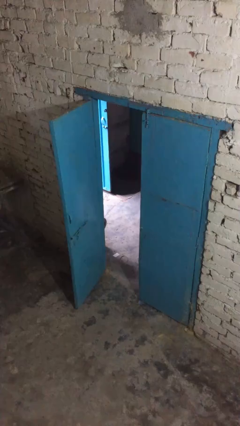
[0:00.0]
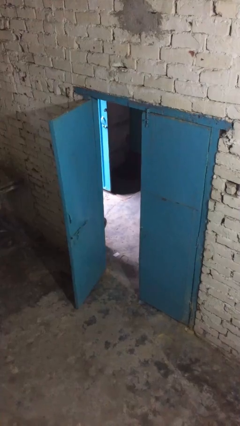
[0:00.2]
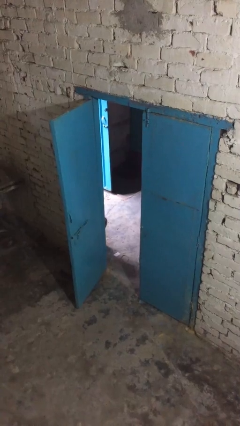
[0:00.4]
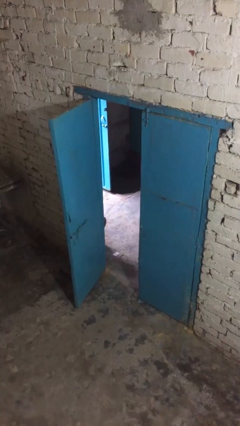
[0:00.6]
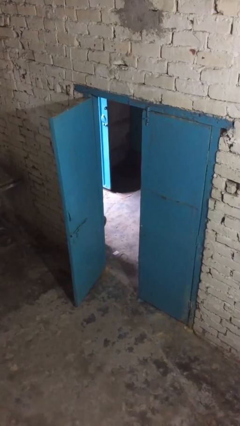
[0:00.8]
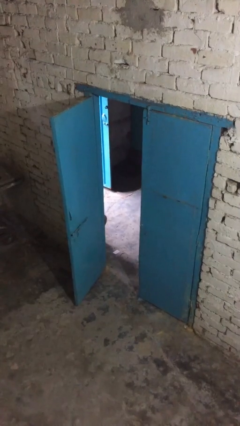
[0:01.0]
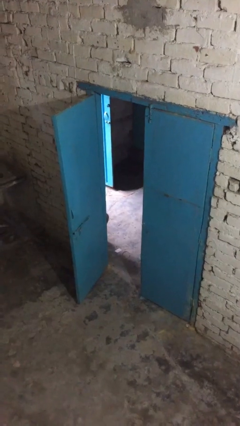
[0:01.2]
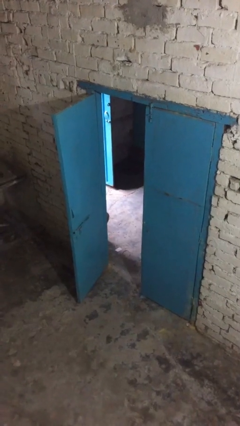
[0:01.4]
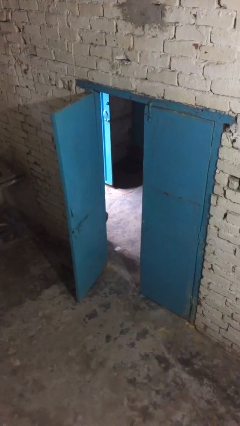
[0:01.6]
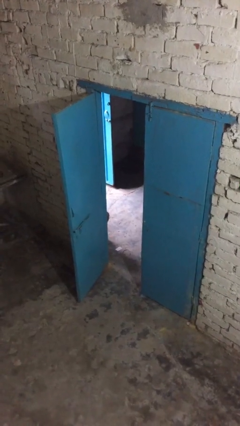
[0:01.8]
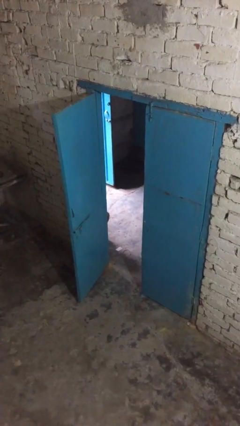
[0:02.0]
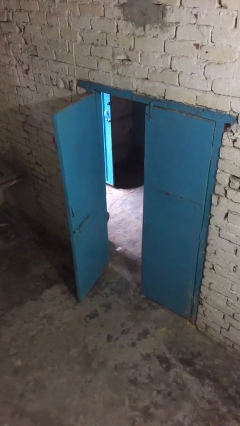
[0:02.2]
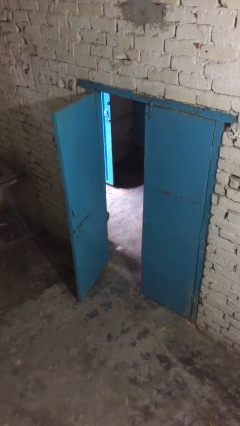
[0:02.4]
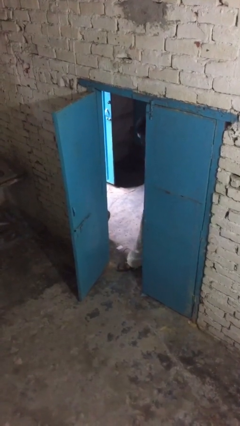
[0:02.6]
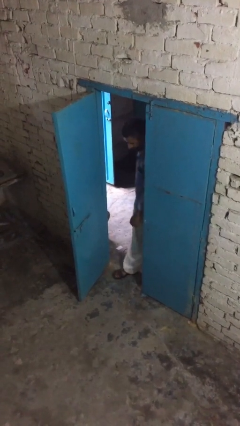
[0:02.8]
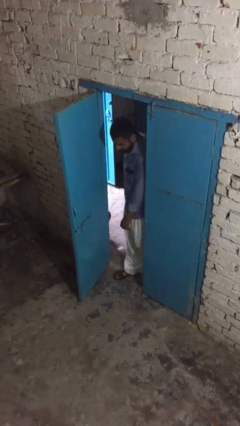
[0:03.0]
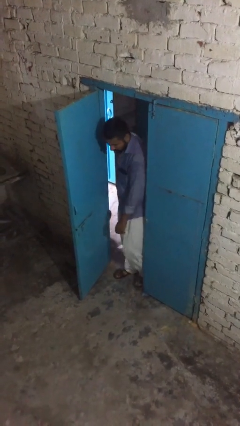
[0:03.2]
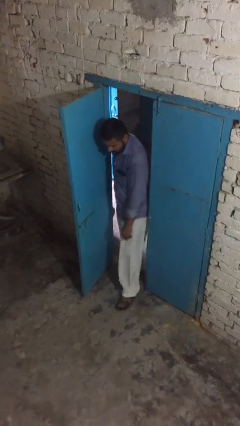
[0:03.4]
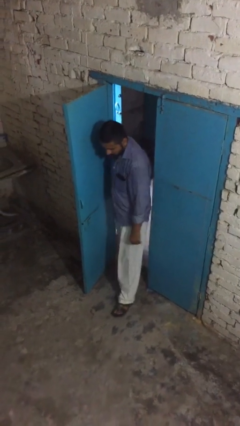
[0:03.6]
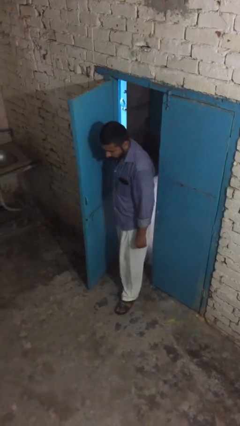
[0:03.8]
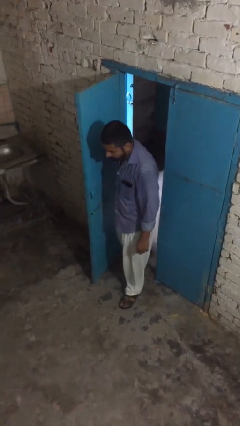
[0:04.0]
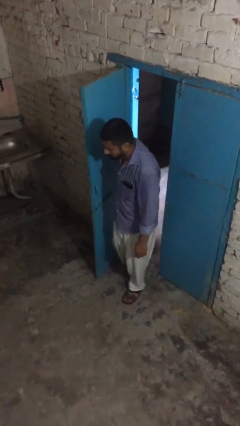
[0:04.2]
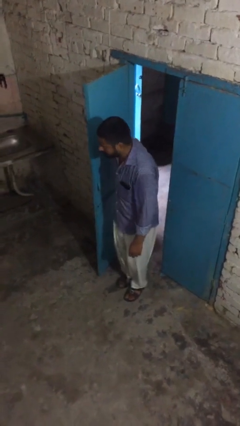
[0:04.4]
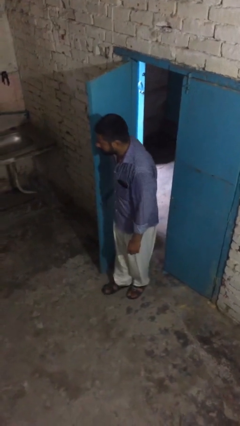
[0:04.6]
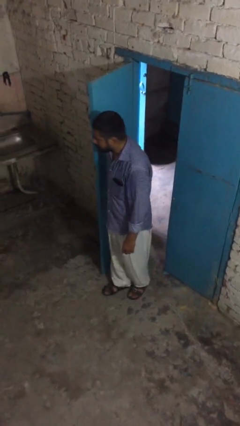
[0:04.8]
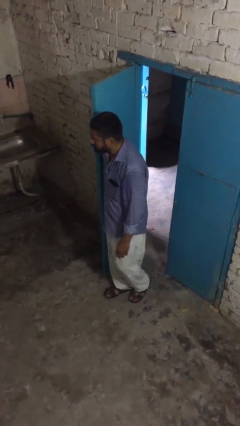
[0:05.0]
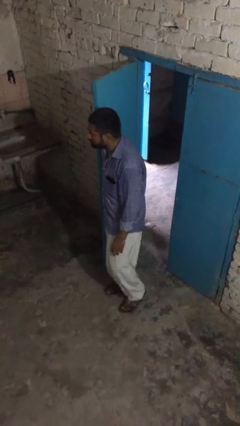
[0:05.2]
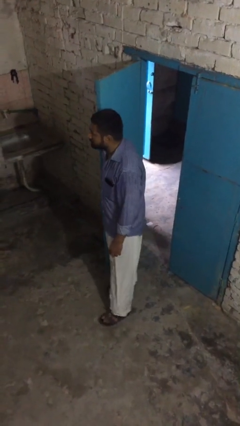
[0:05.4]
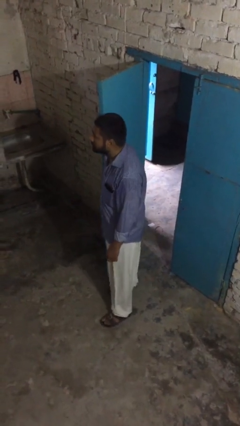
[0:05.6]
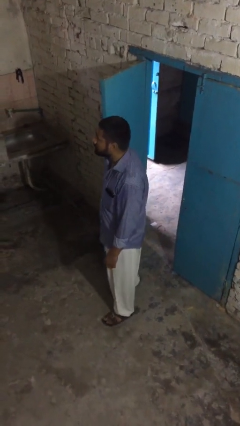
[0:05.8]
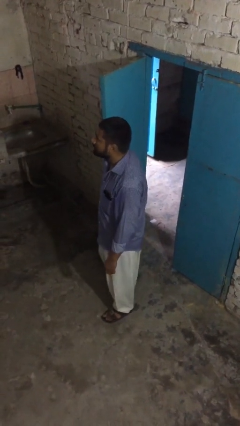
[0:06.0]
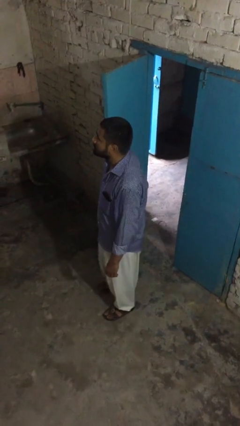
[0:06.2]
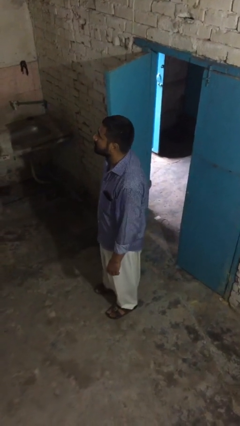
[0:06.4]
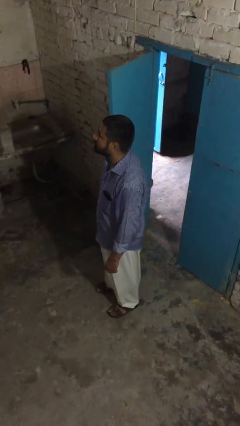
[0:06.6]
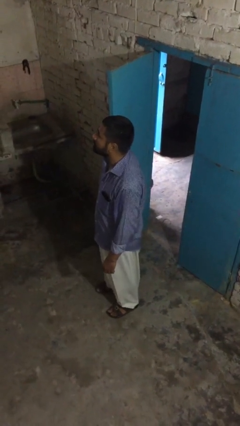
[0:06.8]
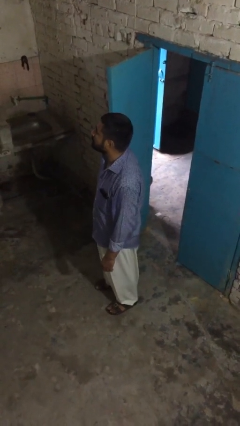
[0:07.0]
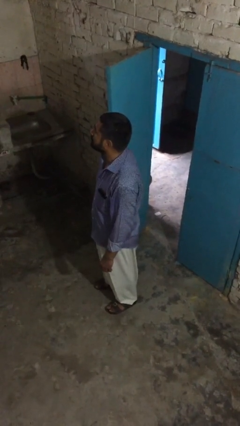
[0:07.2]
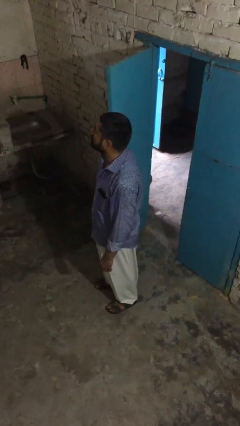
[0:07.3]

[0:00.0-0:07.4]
person enters scene through structure

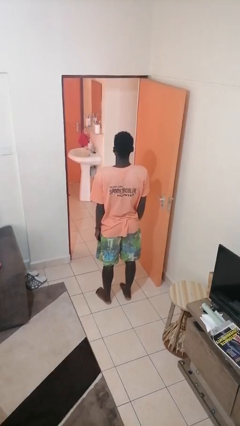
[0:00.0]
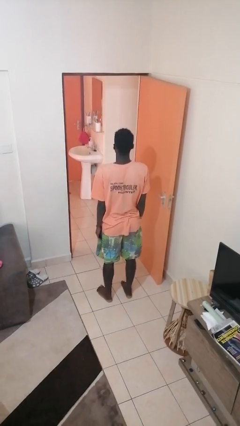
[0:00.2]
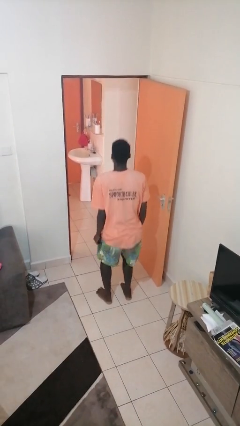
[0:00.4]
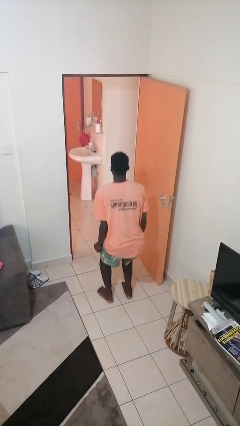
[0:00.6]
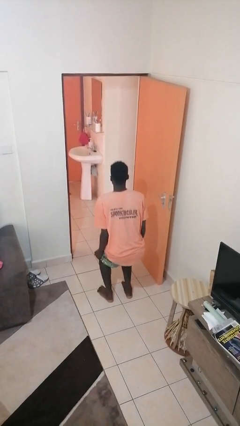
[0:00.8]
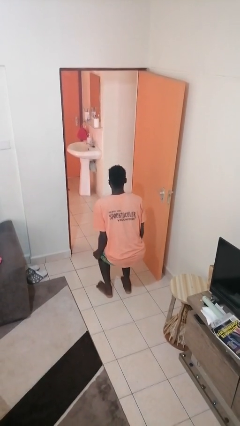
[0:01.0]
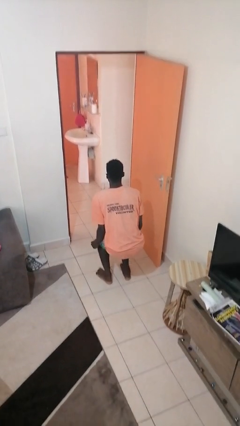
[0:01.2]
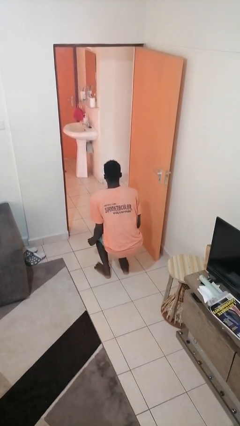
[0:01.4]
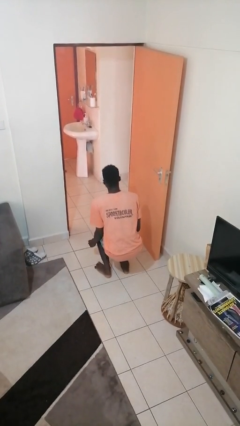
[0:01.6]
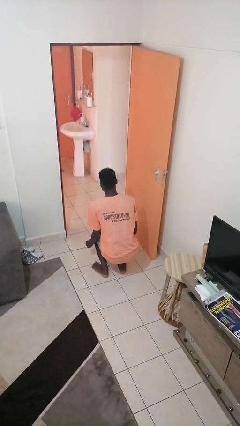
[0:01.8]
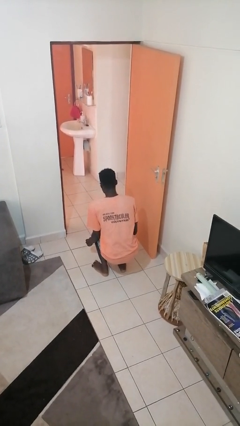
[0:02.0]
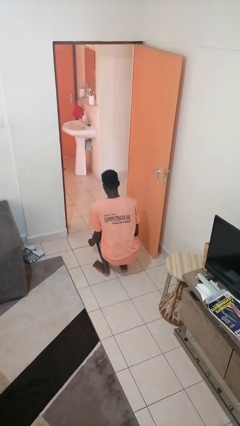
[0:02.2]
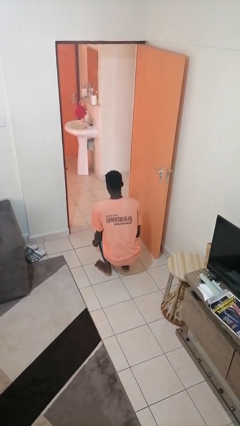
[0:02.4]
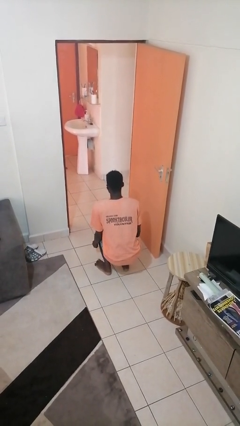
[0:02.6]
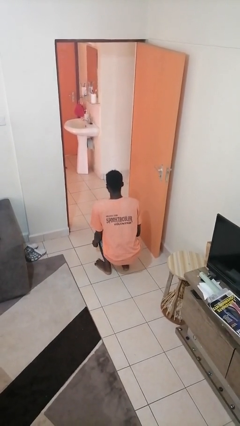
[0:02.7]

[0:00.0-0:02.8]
person squats

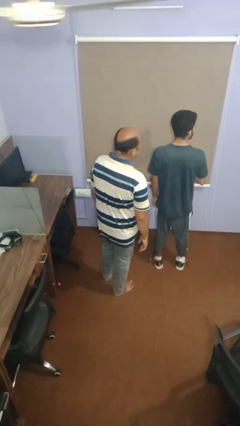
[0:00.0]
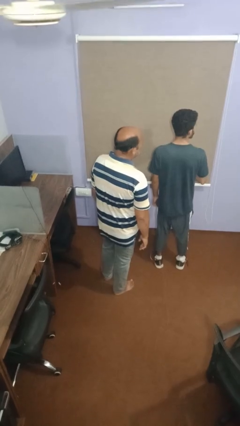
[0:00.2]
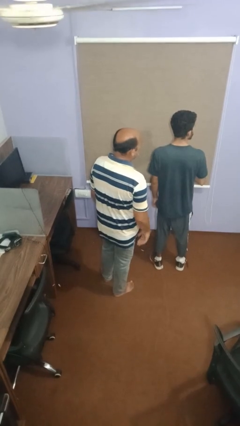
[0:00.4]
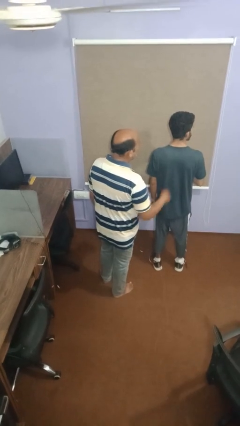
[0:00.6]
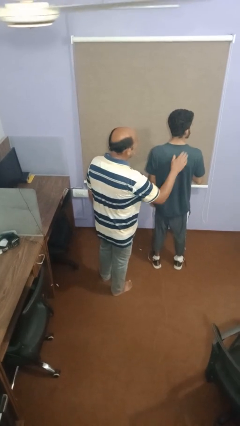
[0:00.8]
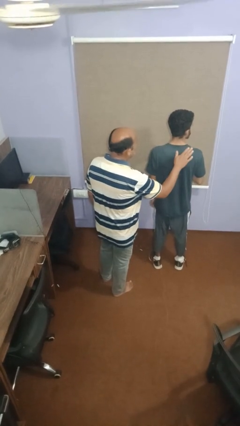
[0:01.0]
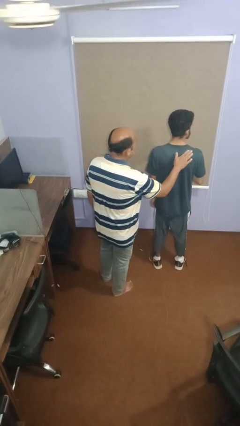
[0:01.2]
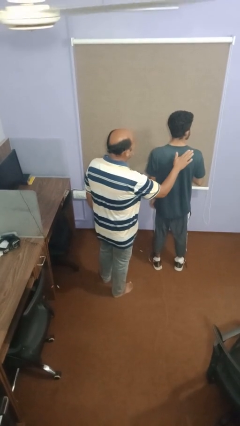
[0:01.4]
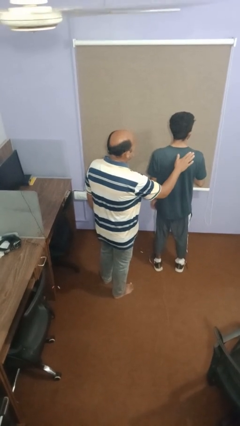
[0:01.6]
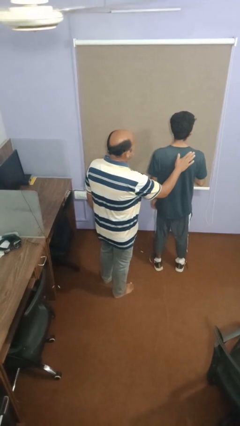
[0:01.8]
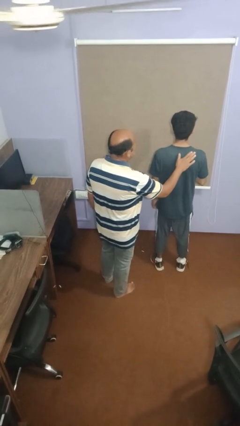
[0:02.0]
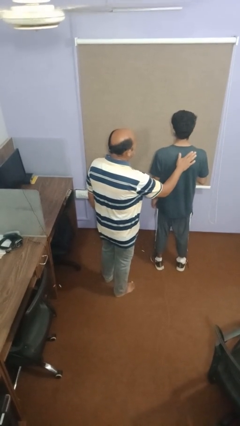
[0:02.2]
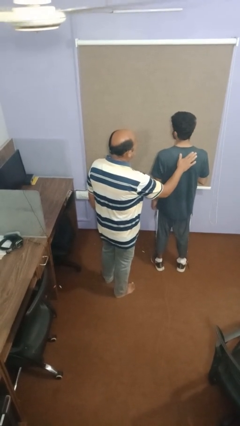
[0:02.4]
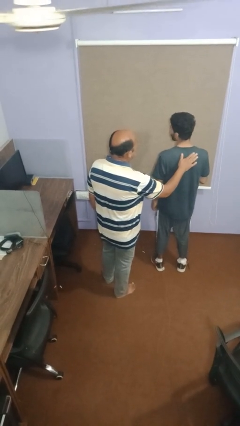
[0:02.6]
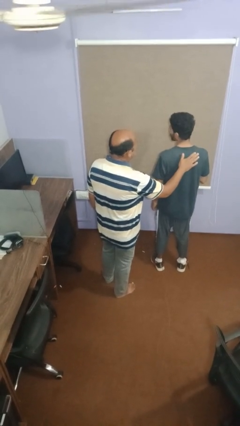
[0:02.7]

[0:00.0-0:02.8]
person touches back of person

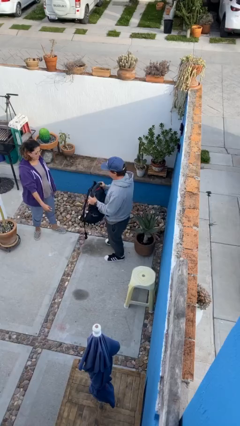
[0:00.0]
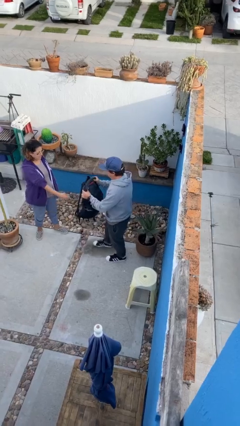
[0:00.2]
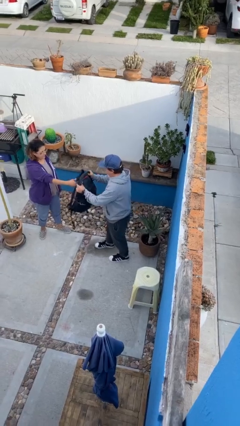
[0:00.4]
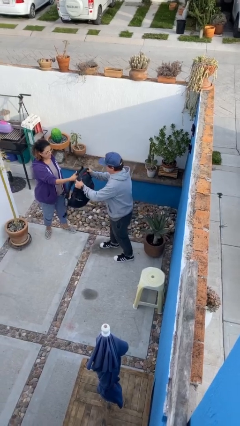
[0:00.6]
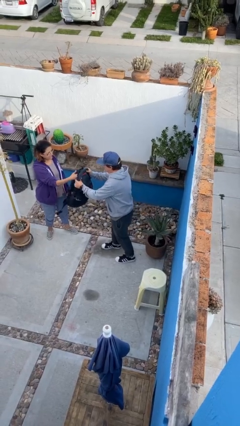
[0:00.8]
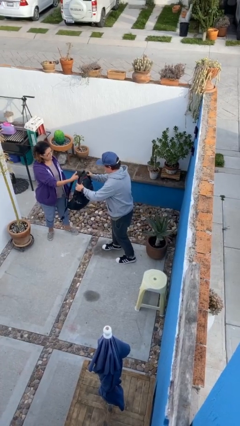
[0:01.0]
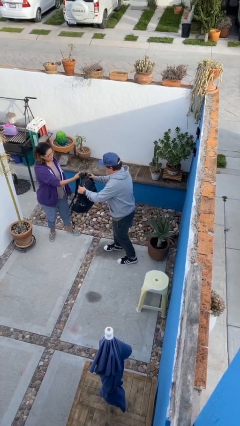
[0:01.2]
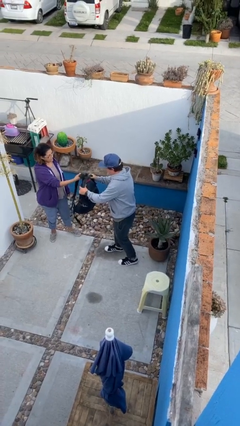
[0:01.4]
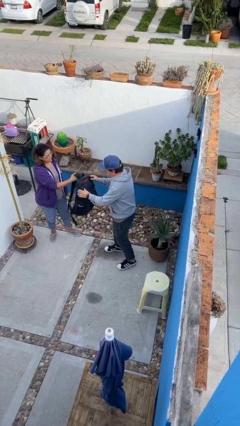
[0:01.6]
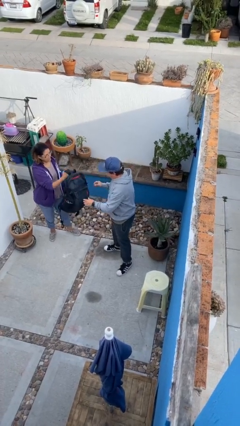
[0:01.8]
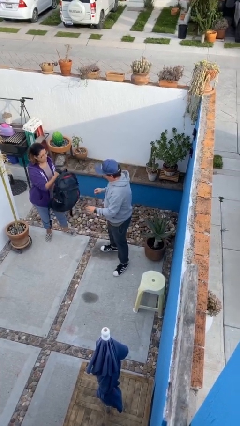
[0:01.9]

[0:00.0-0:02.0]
person transfers object to person

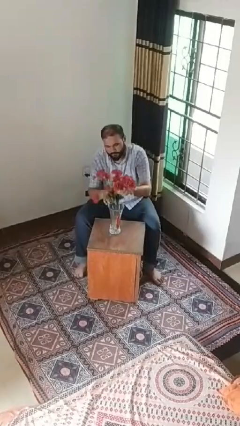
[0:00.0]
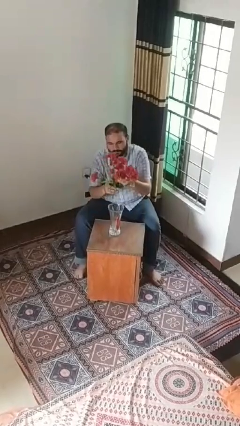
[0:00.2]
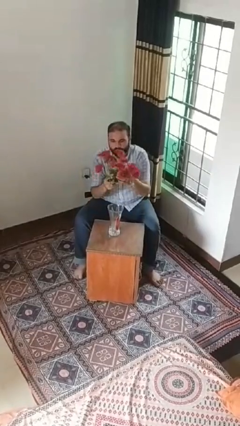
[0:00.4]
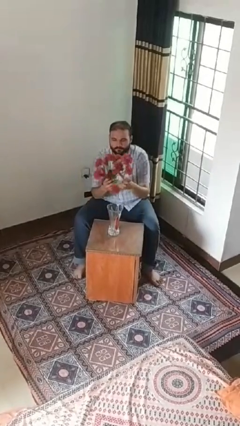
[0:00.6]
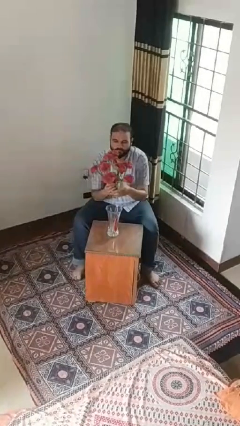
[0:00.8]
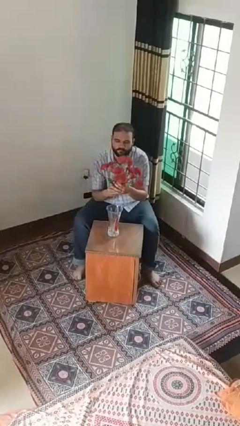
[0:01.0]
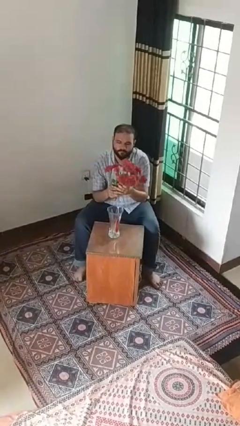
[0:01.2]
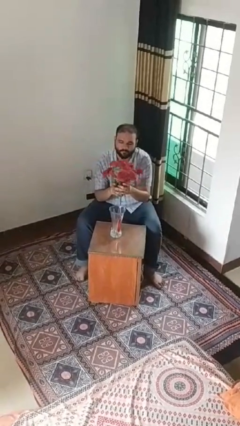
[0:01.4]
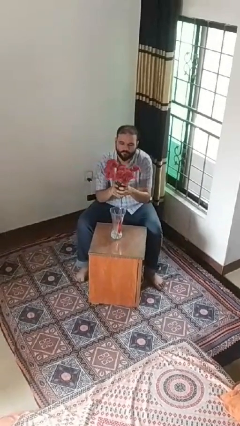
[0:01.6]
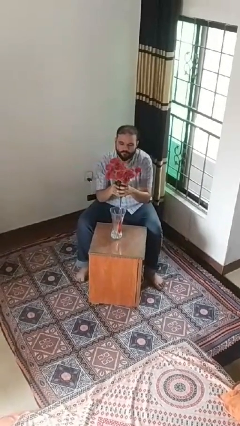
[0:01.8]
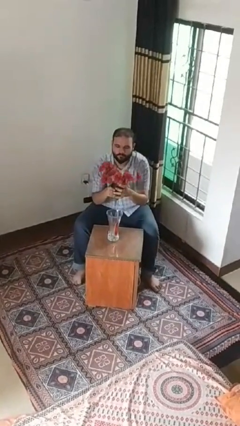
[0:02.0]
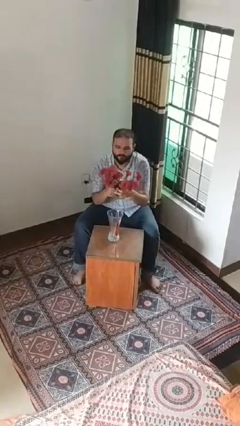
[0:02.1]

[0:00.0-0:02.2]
person arranges flowers in vase

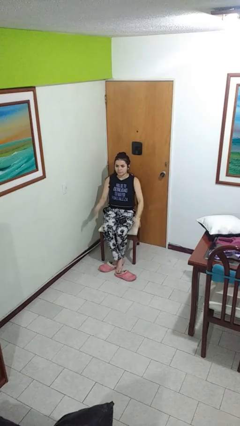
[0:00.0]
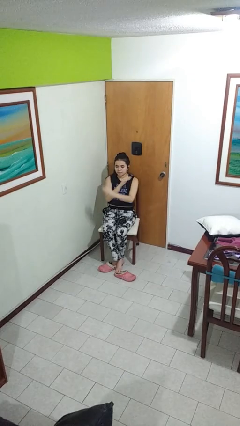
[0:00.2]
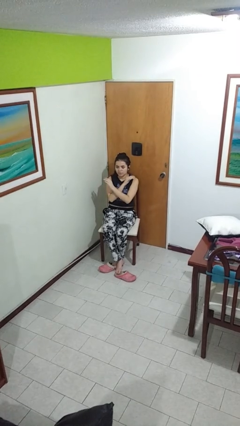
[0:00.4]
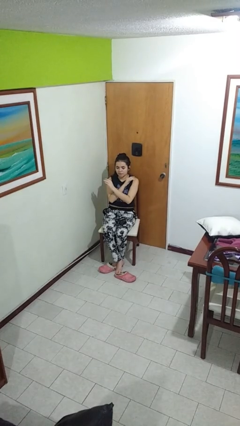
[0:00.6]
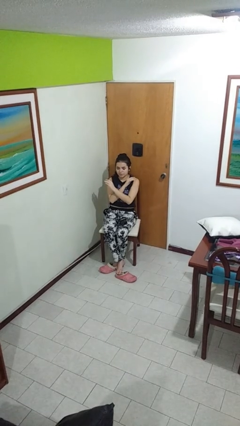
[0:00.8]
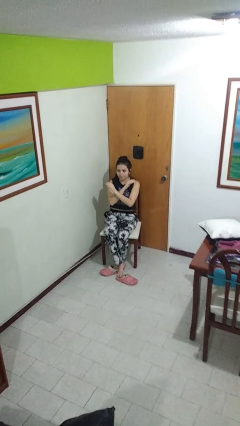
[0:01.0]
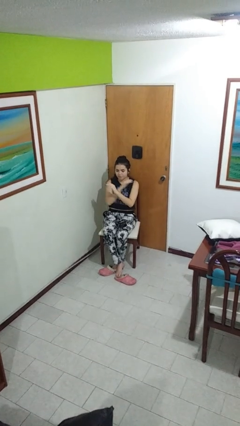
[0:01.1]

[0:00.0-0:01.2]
person gestures arms x
